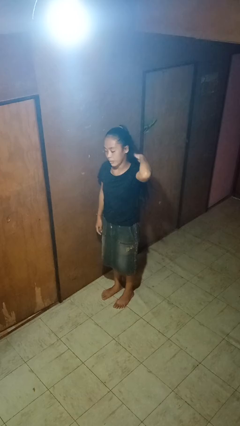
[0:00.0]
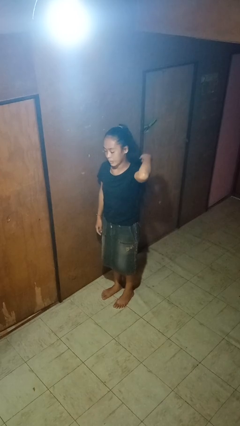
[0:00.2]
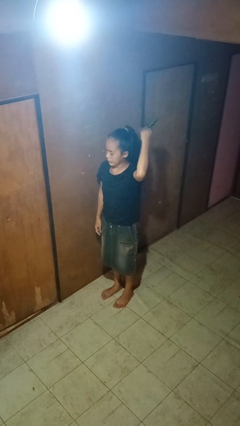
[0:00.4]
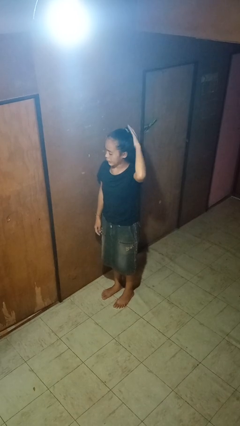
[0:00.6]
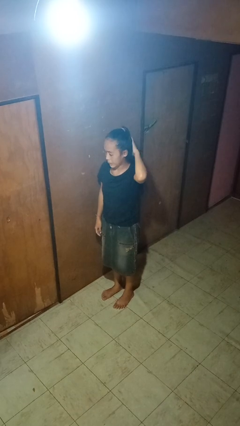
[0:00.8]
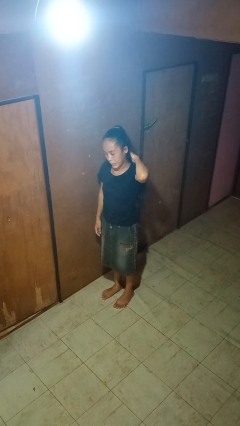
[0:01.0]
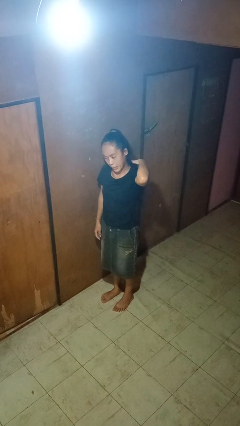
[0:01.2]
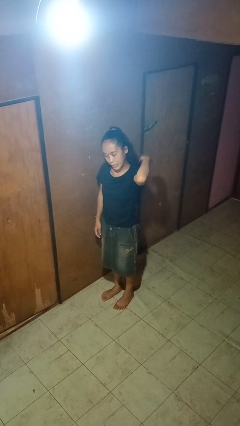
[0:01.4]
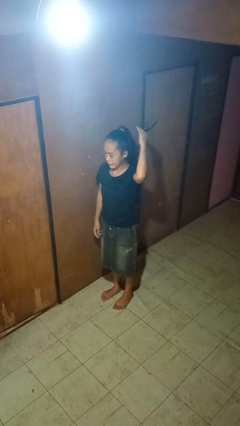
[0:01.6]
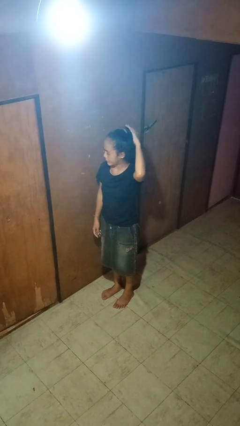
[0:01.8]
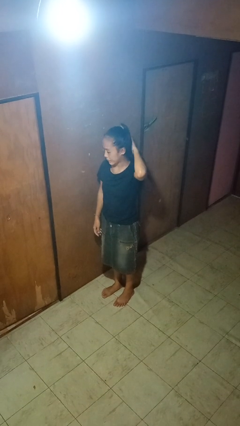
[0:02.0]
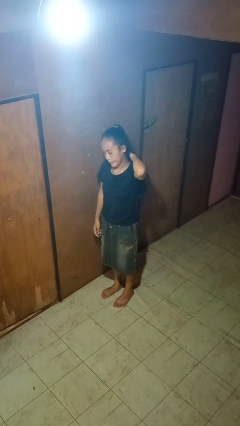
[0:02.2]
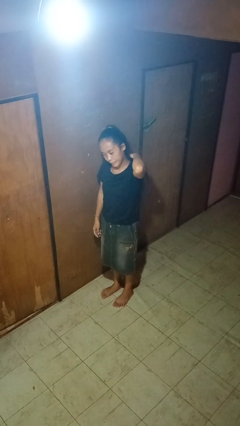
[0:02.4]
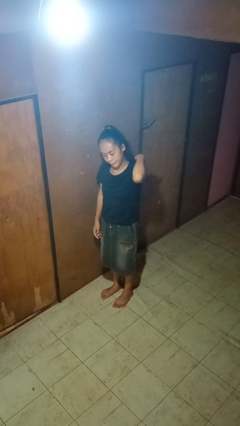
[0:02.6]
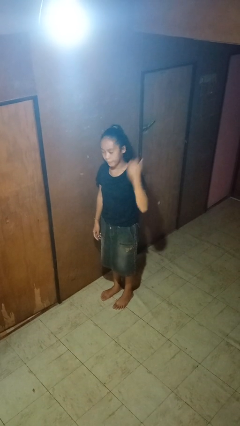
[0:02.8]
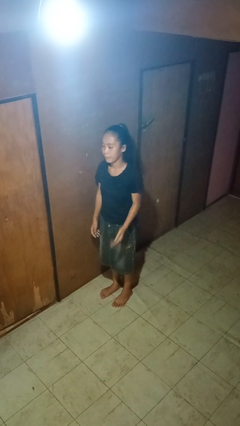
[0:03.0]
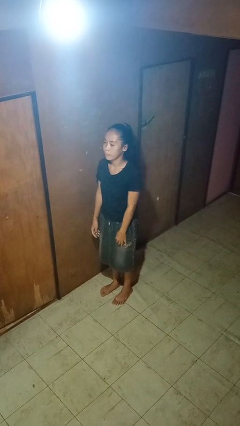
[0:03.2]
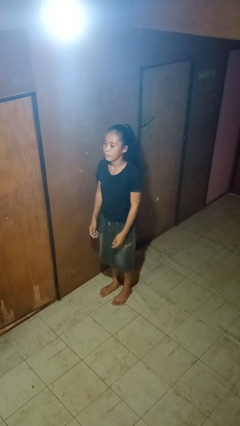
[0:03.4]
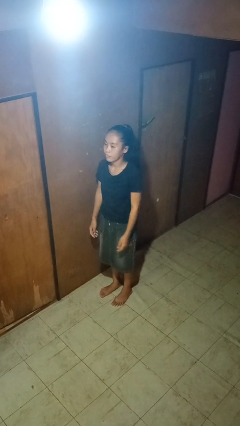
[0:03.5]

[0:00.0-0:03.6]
person strokes hair

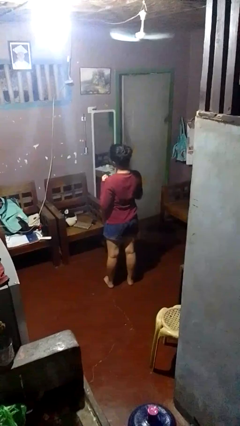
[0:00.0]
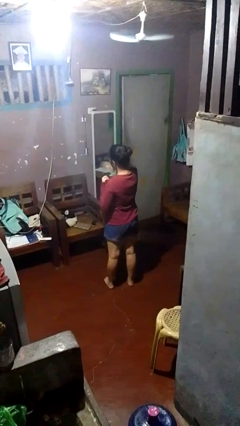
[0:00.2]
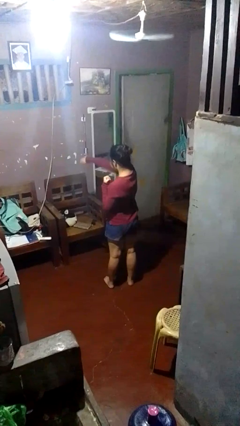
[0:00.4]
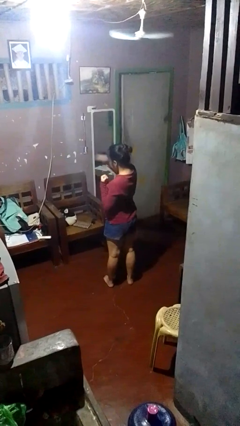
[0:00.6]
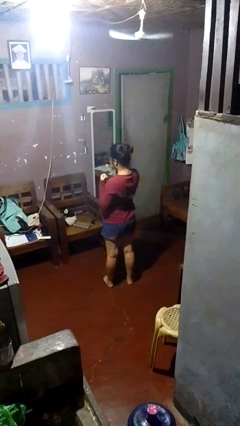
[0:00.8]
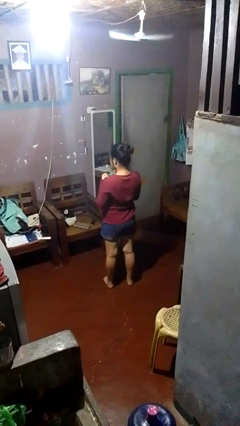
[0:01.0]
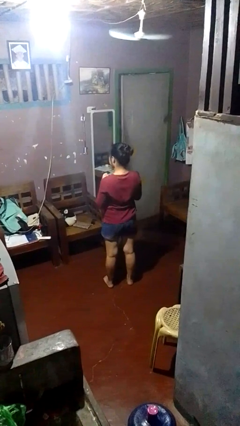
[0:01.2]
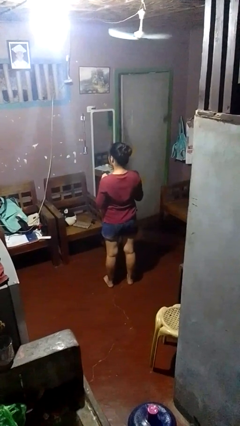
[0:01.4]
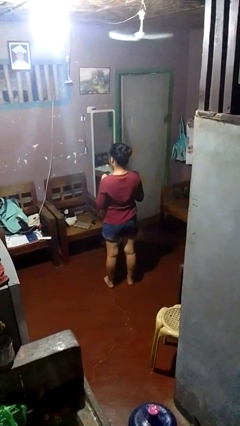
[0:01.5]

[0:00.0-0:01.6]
person punches

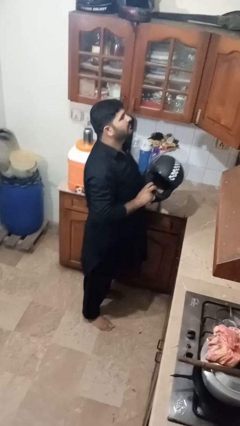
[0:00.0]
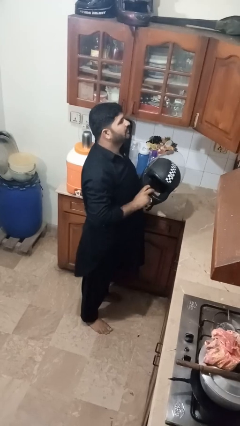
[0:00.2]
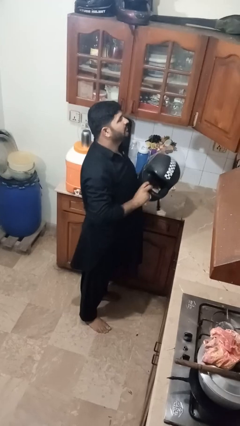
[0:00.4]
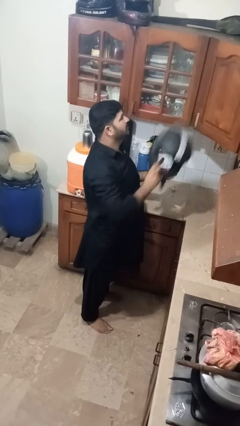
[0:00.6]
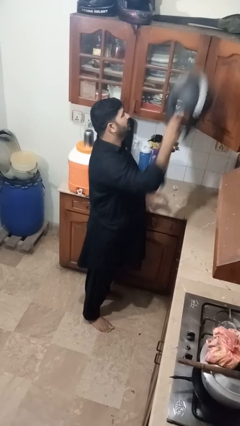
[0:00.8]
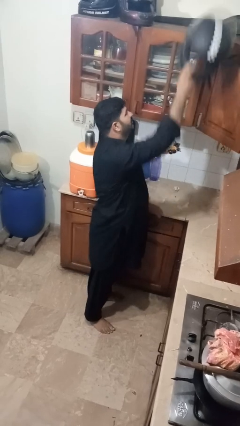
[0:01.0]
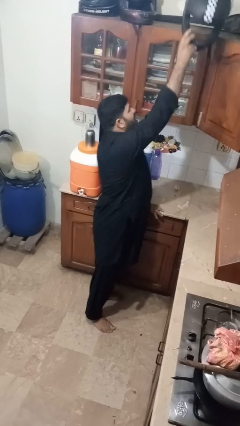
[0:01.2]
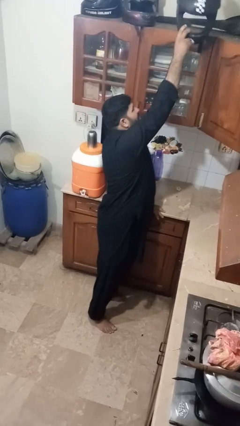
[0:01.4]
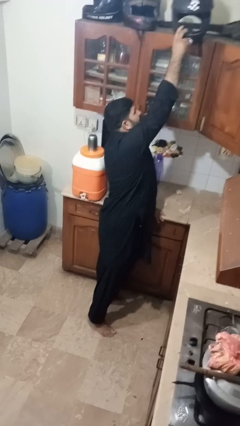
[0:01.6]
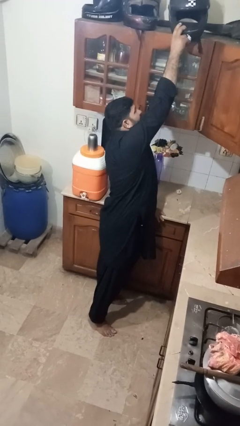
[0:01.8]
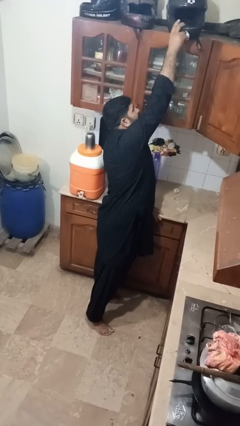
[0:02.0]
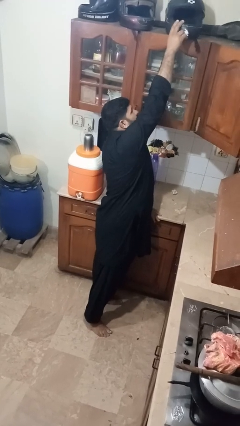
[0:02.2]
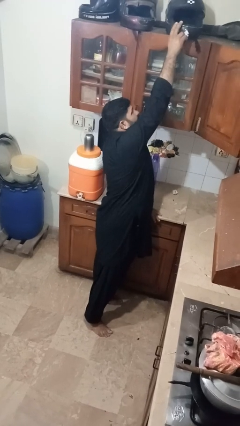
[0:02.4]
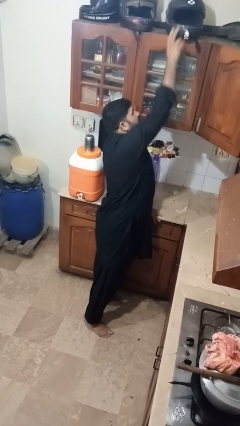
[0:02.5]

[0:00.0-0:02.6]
person puts down object on shelf

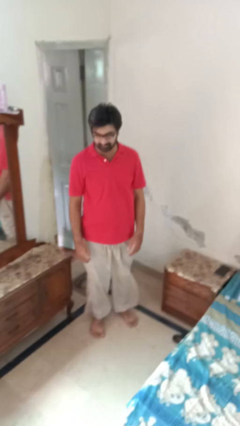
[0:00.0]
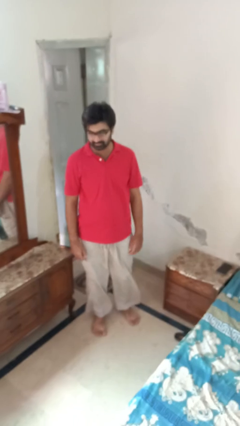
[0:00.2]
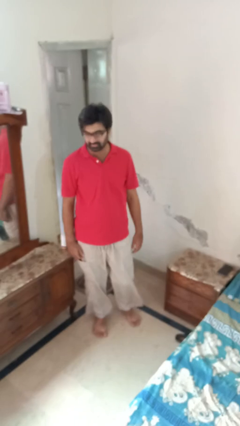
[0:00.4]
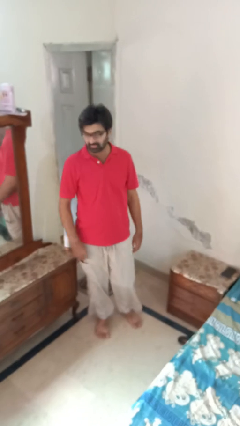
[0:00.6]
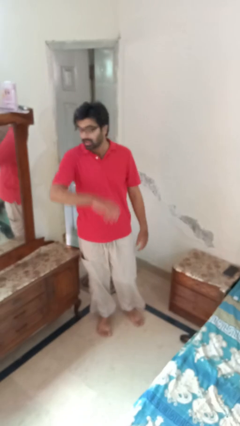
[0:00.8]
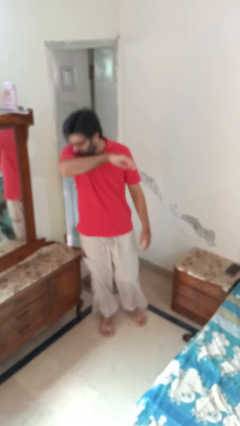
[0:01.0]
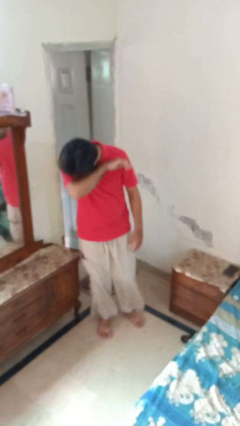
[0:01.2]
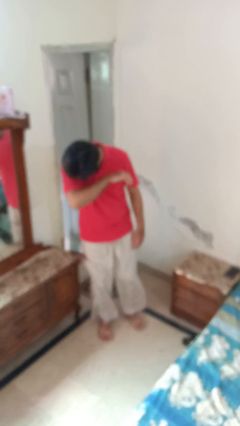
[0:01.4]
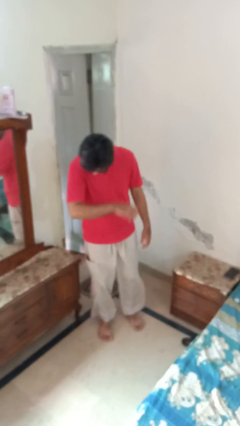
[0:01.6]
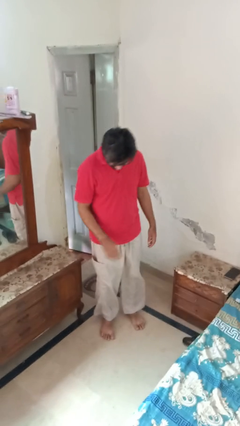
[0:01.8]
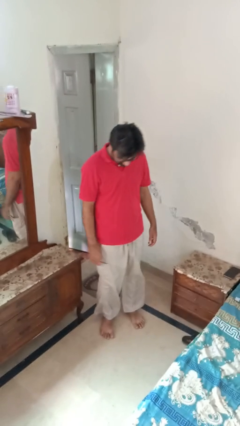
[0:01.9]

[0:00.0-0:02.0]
person sneezes into arm

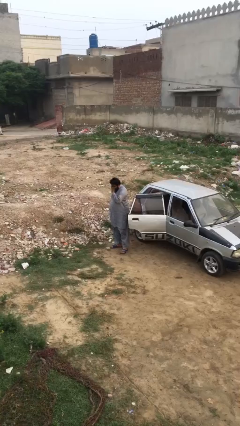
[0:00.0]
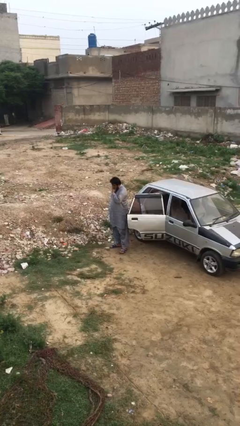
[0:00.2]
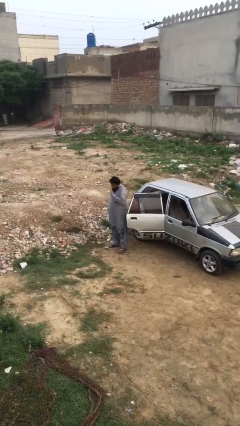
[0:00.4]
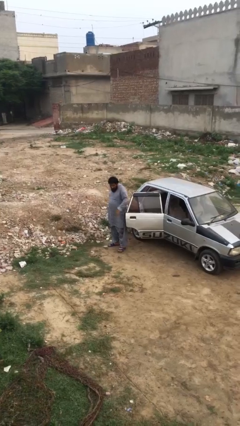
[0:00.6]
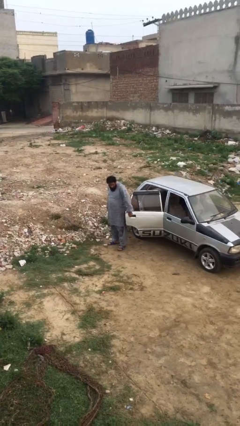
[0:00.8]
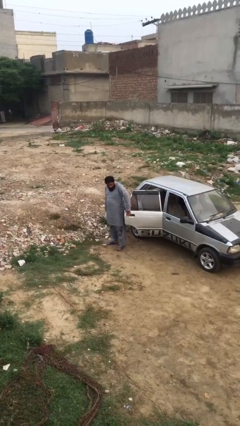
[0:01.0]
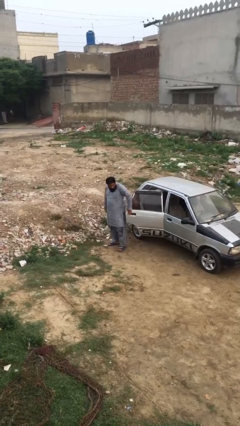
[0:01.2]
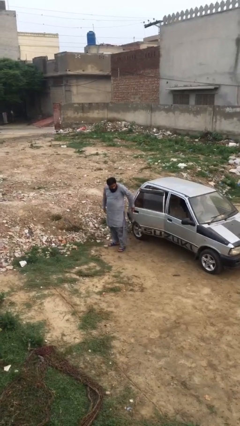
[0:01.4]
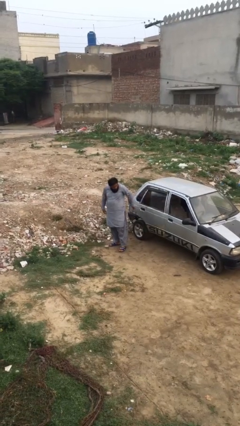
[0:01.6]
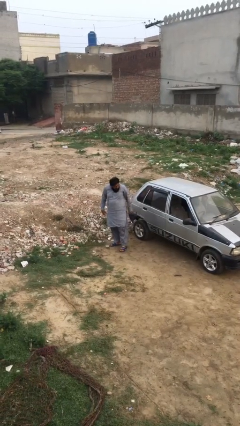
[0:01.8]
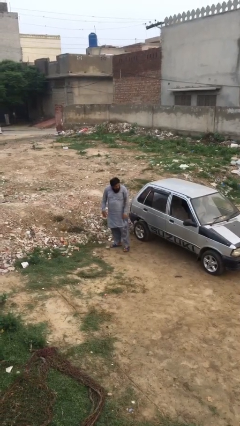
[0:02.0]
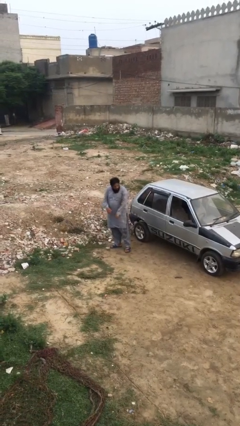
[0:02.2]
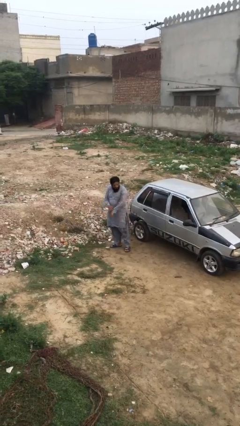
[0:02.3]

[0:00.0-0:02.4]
person closes car door

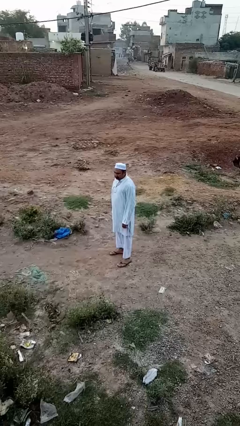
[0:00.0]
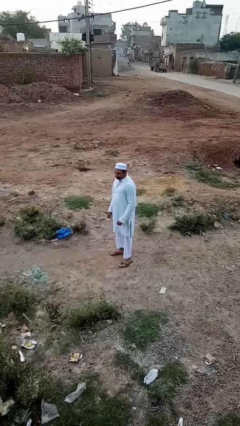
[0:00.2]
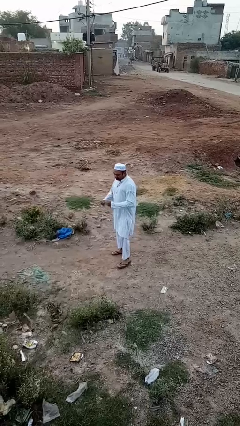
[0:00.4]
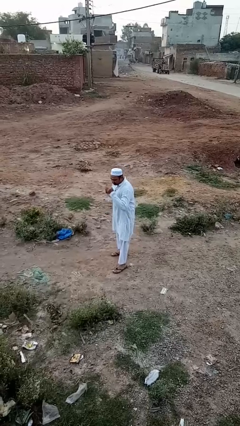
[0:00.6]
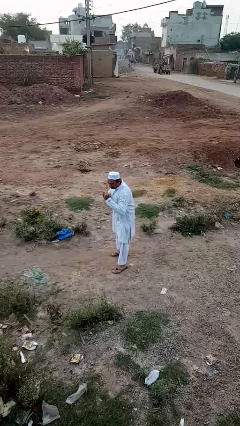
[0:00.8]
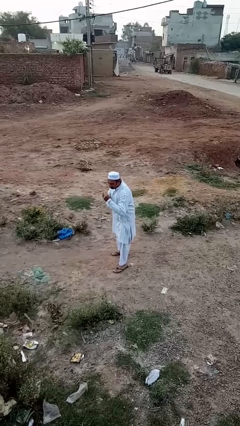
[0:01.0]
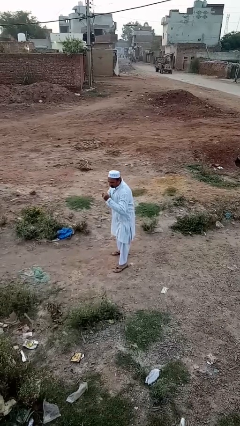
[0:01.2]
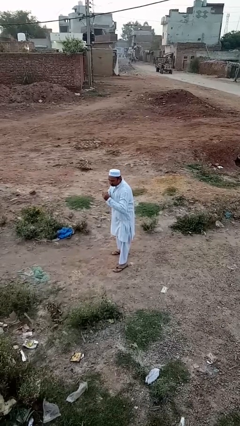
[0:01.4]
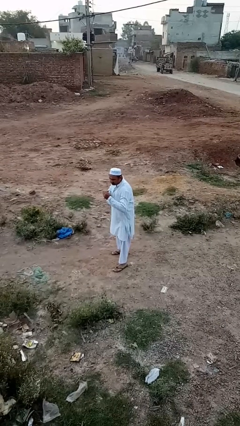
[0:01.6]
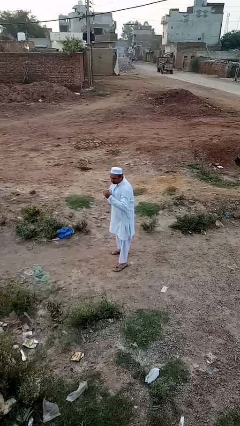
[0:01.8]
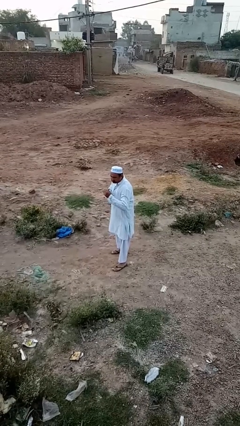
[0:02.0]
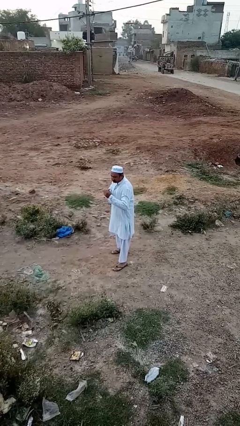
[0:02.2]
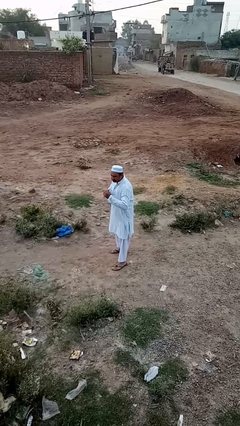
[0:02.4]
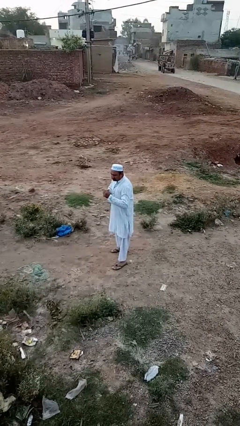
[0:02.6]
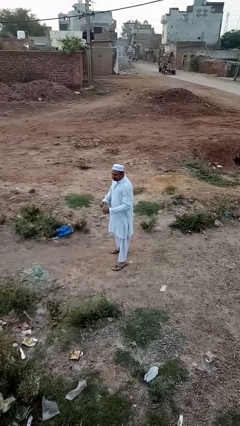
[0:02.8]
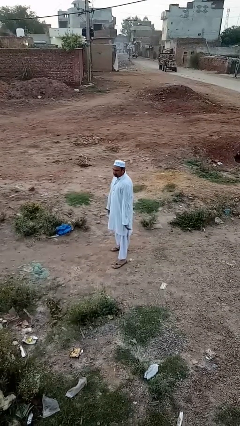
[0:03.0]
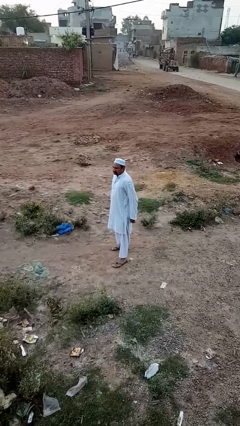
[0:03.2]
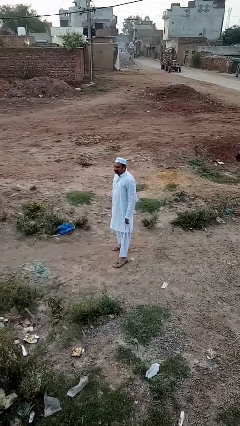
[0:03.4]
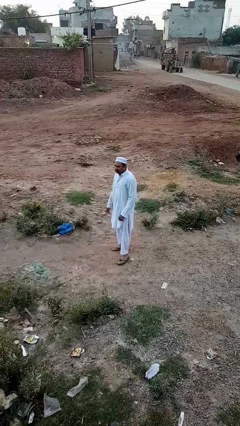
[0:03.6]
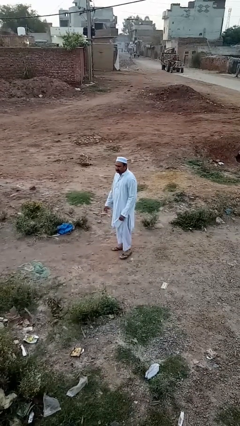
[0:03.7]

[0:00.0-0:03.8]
person karate chop

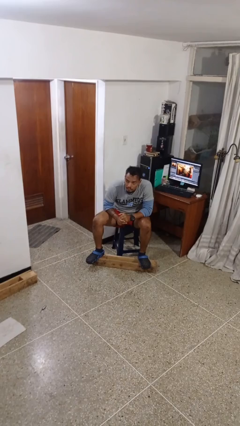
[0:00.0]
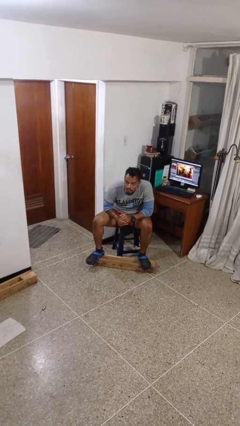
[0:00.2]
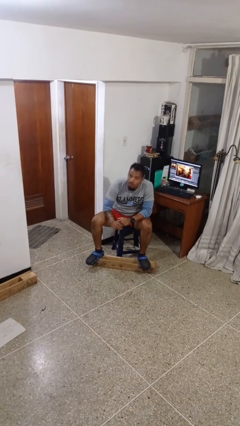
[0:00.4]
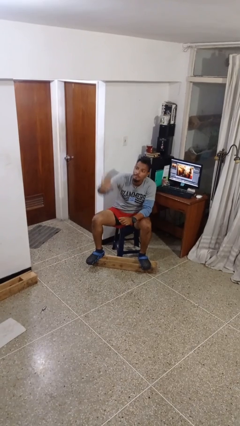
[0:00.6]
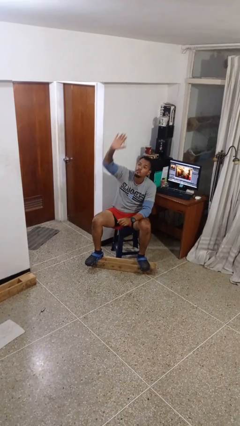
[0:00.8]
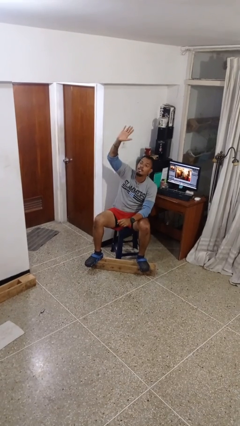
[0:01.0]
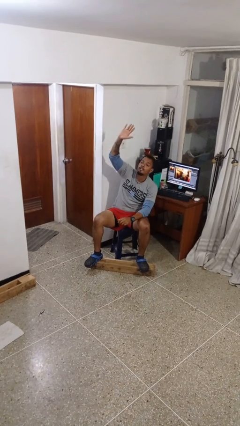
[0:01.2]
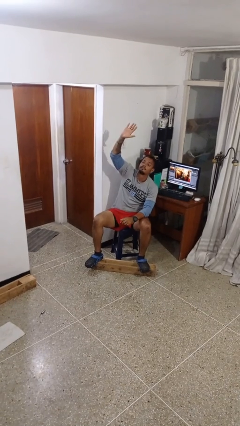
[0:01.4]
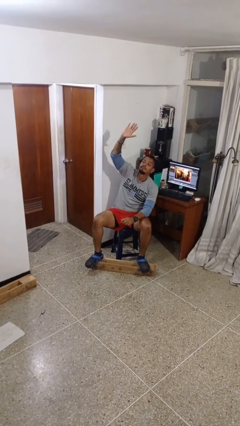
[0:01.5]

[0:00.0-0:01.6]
person gestures raise hand
